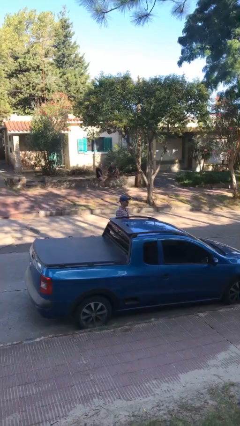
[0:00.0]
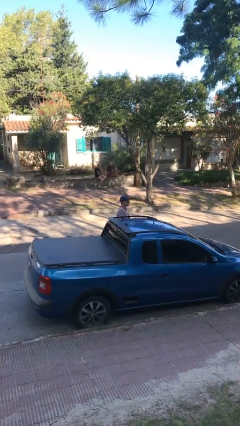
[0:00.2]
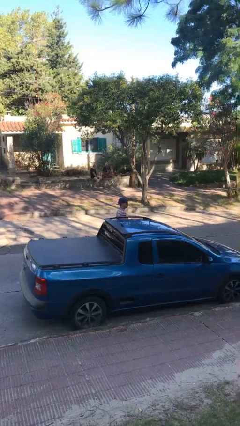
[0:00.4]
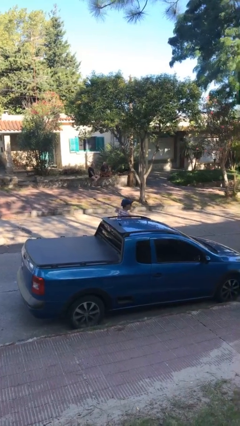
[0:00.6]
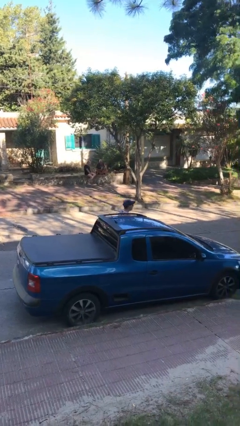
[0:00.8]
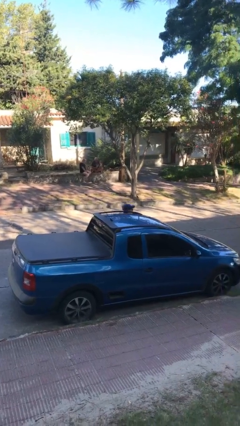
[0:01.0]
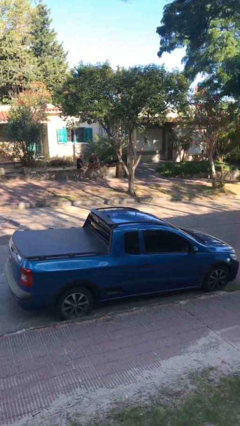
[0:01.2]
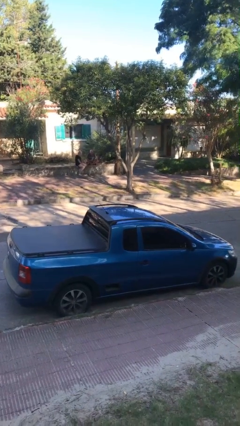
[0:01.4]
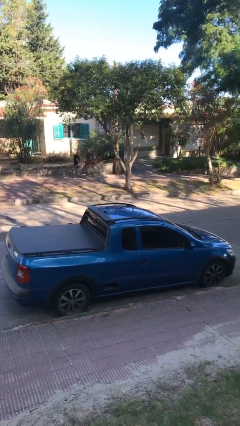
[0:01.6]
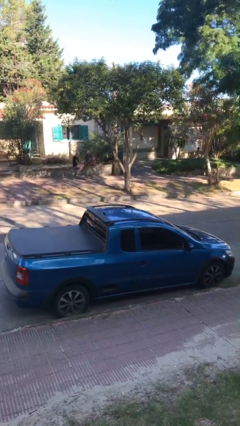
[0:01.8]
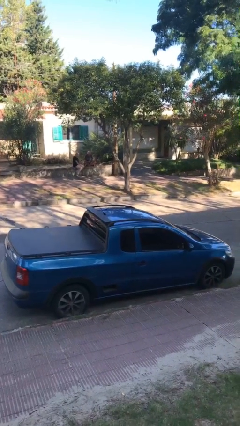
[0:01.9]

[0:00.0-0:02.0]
person enters car

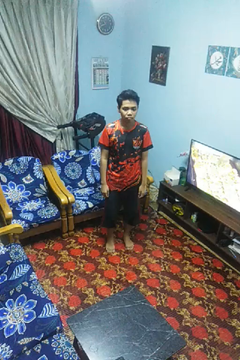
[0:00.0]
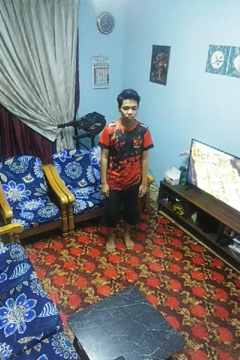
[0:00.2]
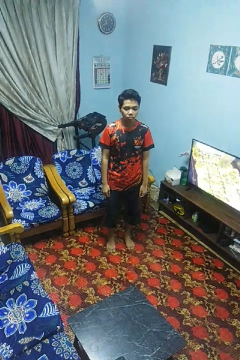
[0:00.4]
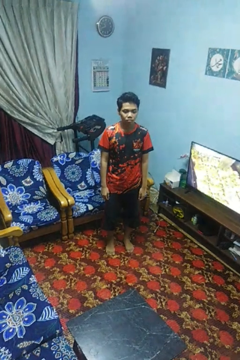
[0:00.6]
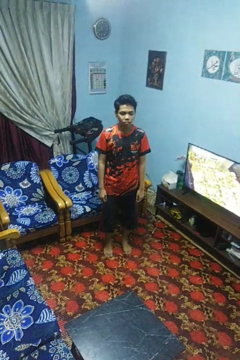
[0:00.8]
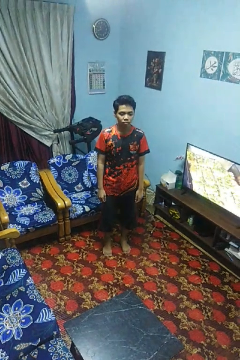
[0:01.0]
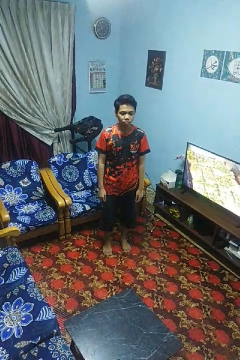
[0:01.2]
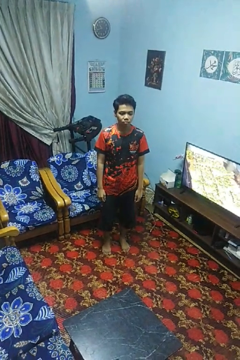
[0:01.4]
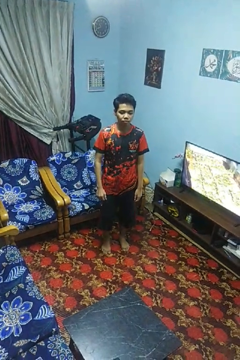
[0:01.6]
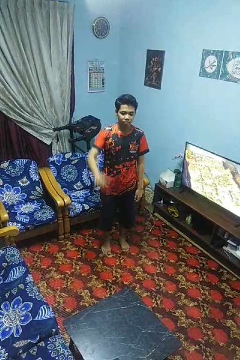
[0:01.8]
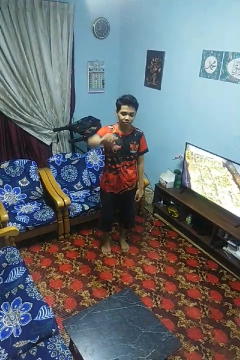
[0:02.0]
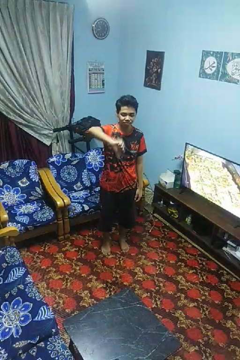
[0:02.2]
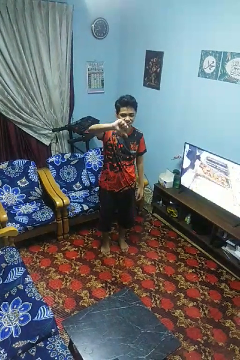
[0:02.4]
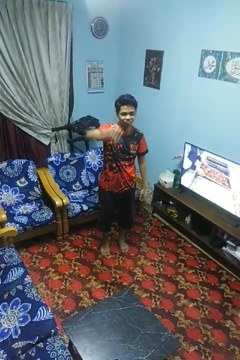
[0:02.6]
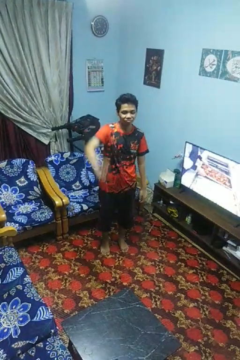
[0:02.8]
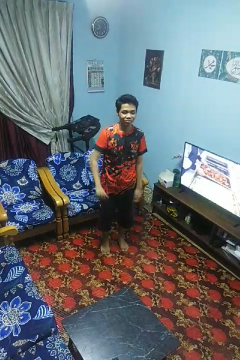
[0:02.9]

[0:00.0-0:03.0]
person gestures thumbs down

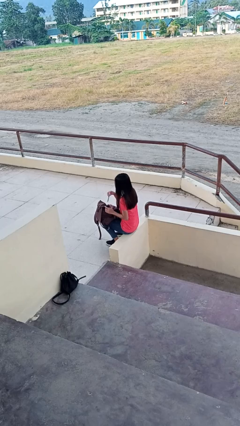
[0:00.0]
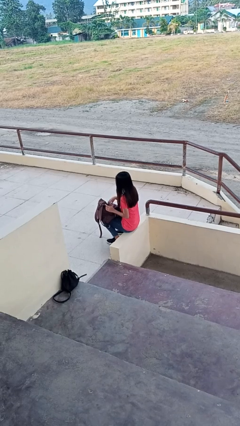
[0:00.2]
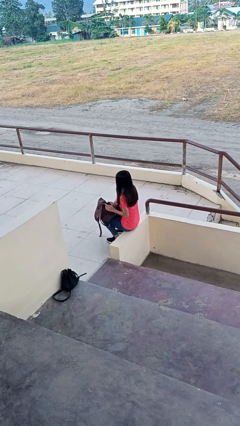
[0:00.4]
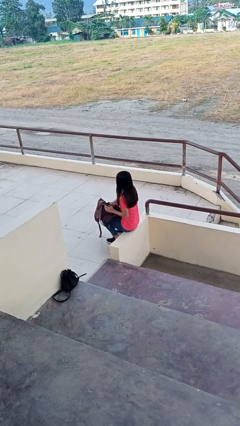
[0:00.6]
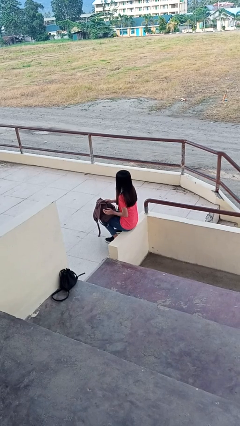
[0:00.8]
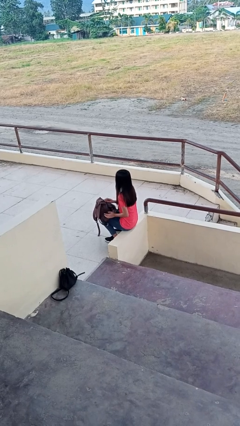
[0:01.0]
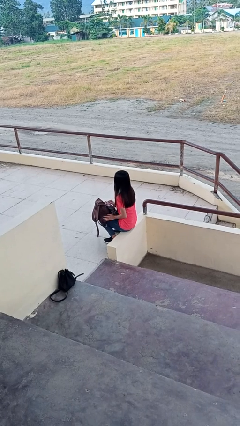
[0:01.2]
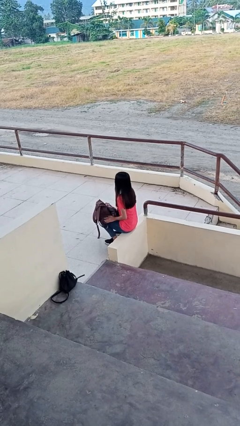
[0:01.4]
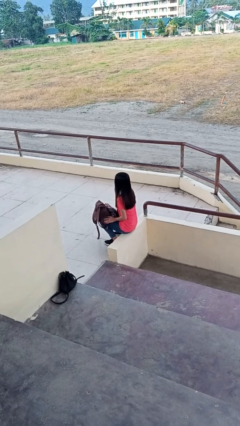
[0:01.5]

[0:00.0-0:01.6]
person puts object into backpack

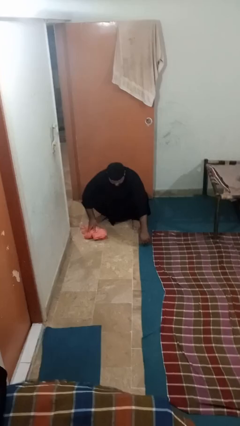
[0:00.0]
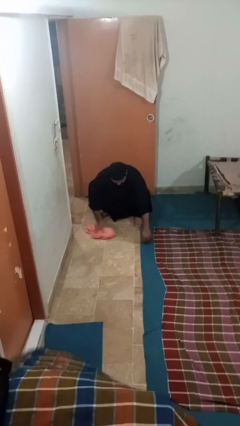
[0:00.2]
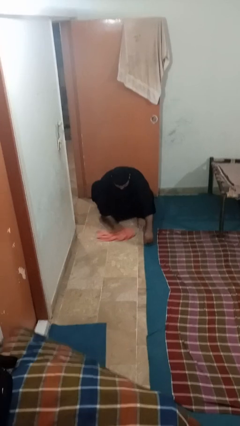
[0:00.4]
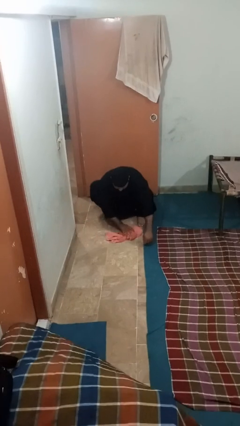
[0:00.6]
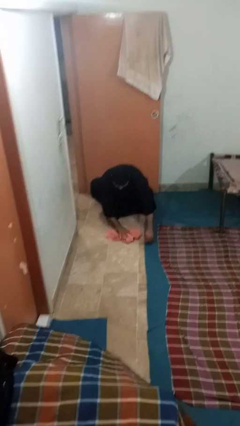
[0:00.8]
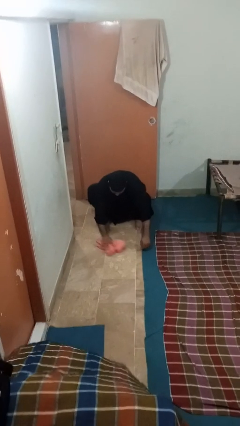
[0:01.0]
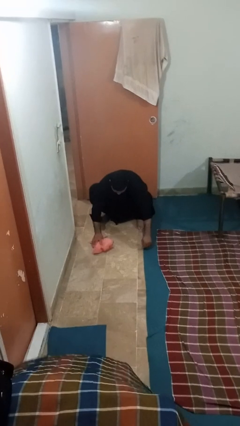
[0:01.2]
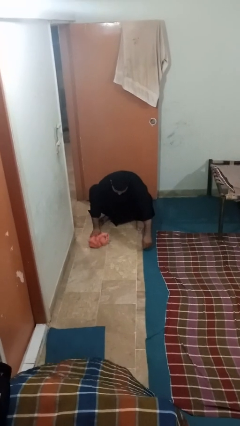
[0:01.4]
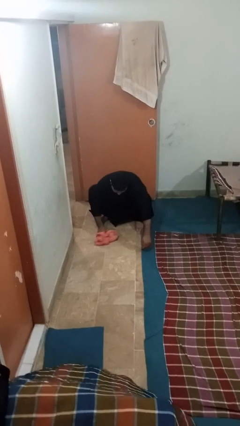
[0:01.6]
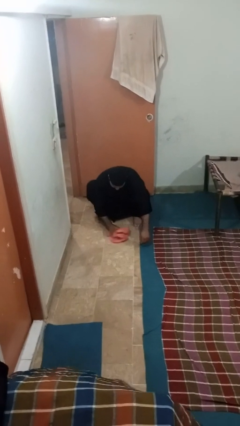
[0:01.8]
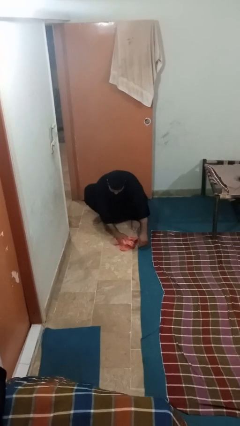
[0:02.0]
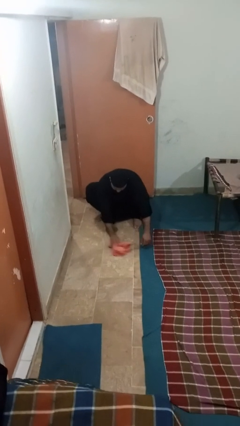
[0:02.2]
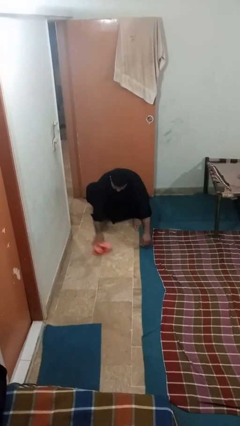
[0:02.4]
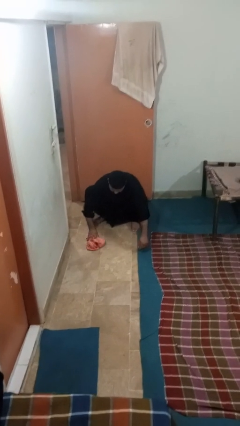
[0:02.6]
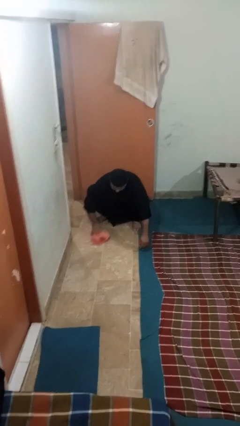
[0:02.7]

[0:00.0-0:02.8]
person mops

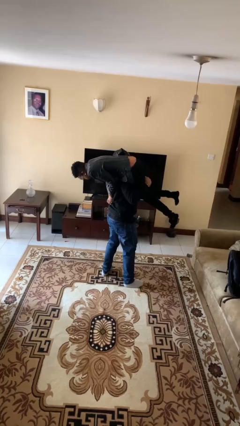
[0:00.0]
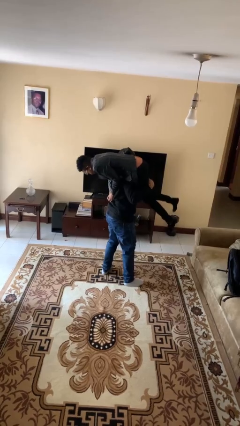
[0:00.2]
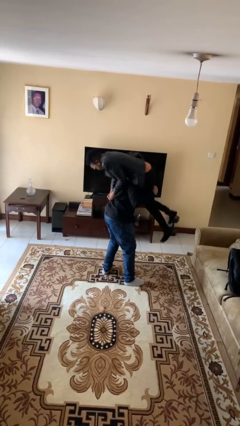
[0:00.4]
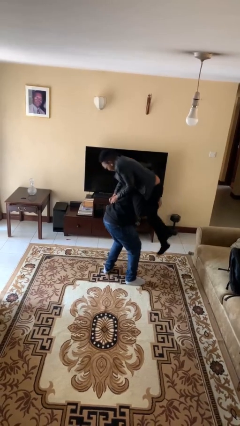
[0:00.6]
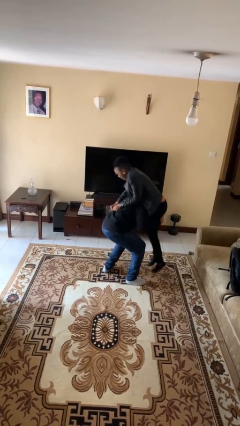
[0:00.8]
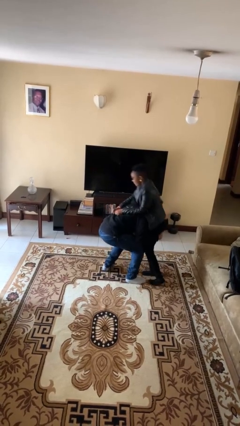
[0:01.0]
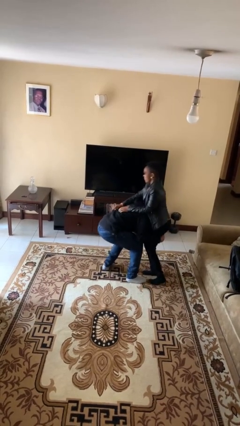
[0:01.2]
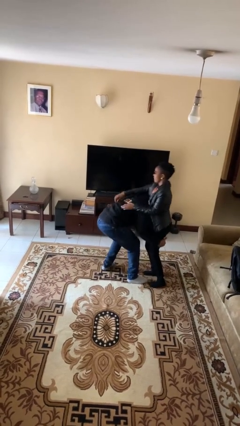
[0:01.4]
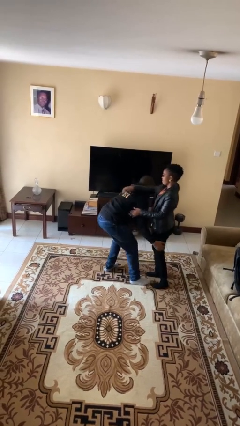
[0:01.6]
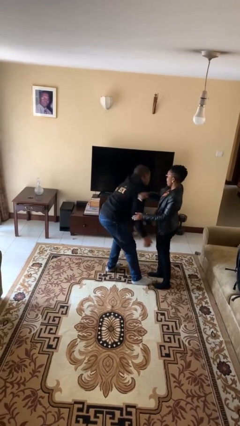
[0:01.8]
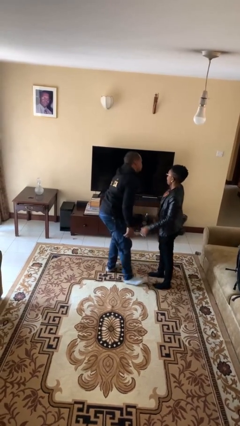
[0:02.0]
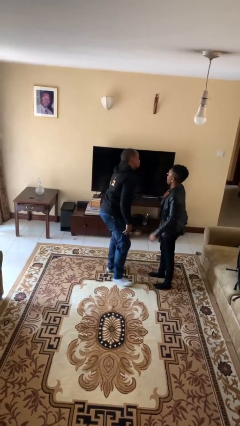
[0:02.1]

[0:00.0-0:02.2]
person puts down person

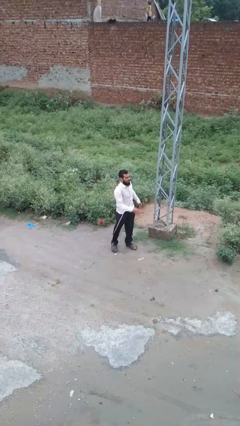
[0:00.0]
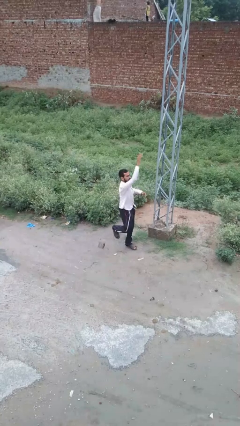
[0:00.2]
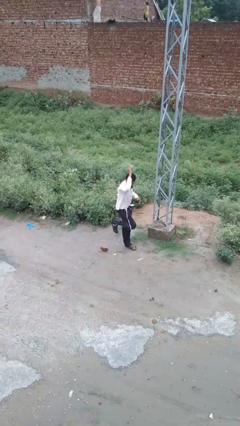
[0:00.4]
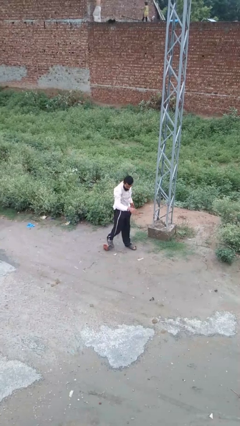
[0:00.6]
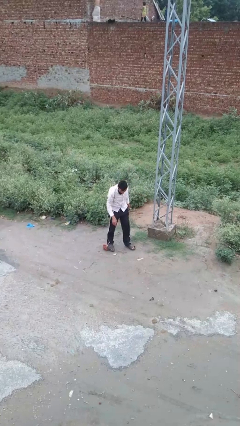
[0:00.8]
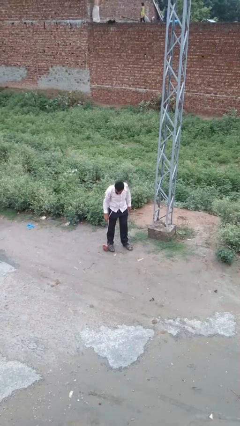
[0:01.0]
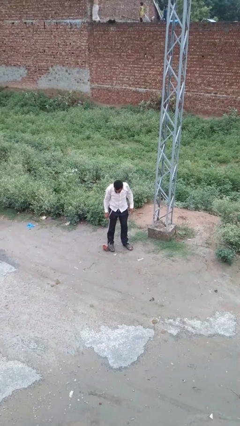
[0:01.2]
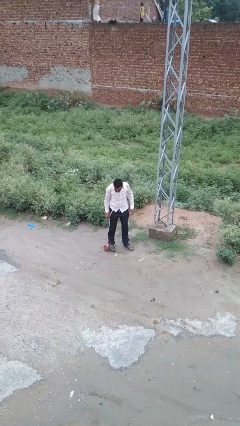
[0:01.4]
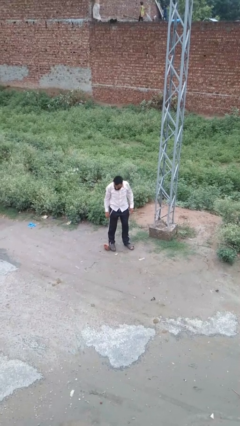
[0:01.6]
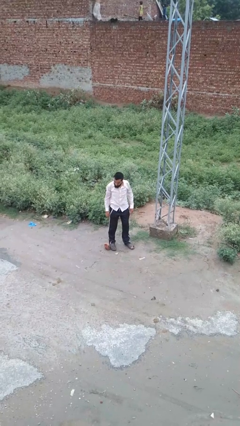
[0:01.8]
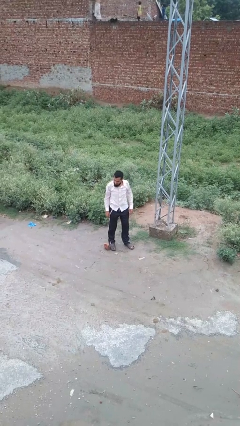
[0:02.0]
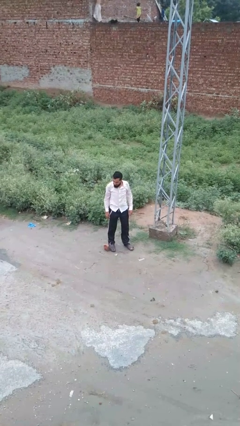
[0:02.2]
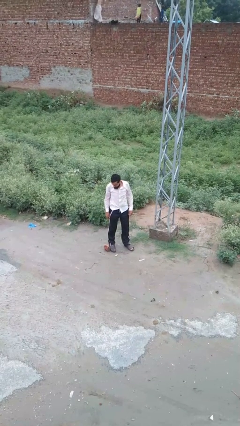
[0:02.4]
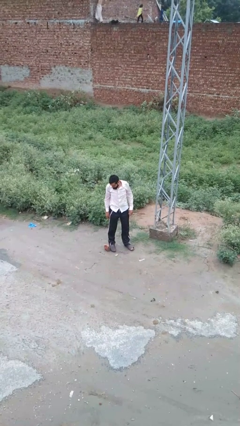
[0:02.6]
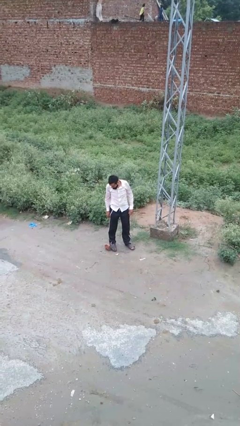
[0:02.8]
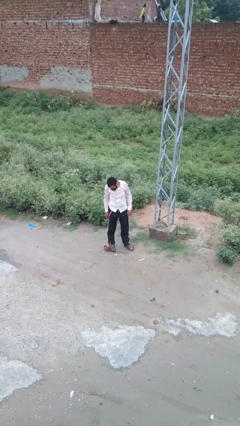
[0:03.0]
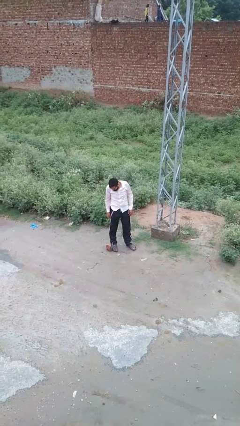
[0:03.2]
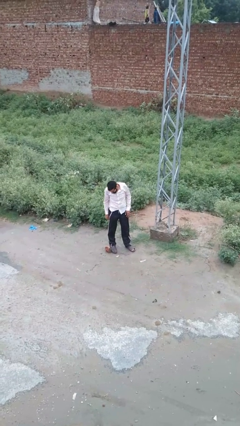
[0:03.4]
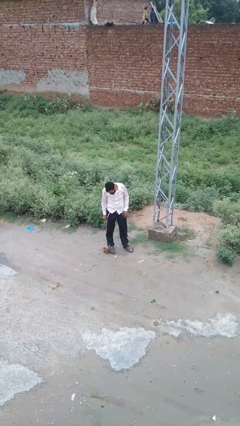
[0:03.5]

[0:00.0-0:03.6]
person drops object

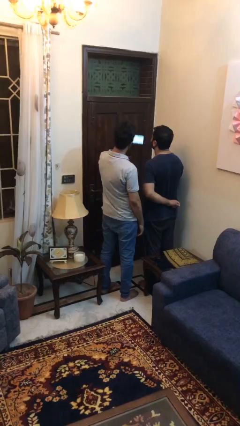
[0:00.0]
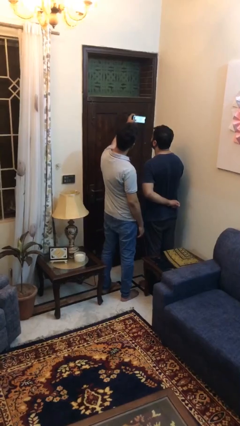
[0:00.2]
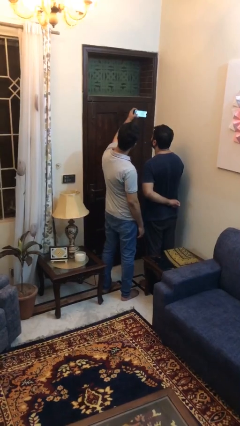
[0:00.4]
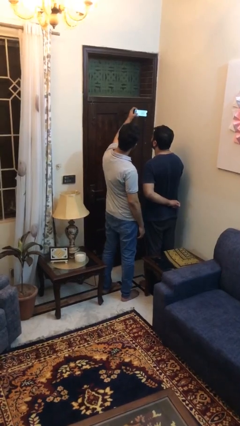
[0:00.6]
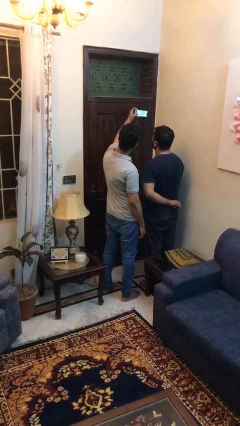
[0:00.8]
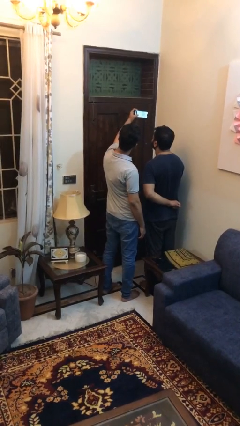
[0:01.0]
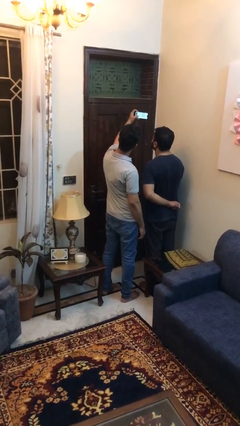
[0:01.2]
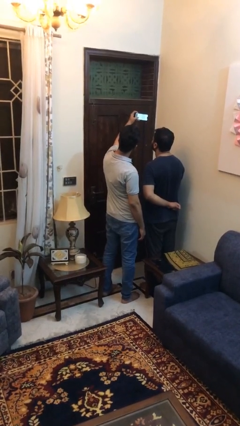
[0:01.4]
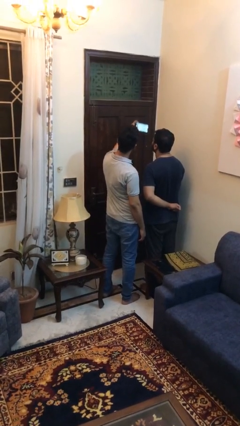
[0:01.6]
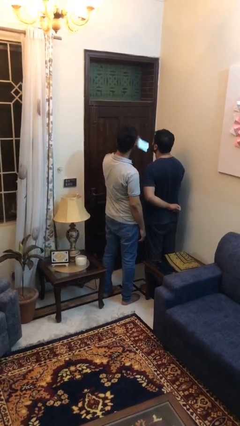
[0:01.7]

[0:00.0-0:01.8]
person takes selfie with person

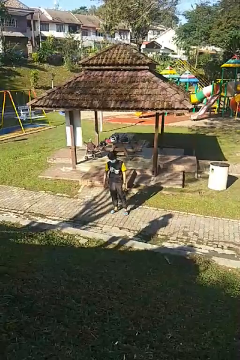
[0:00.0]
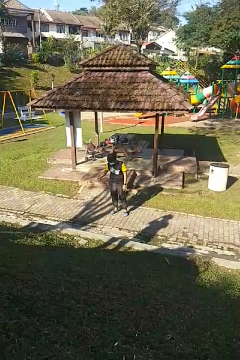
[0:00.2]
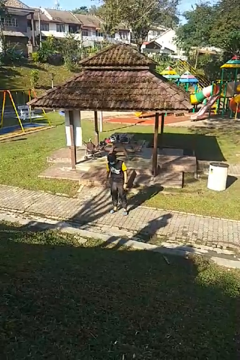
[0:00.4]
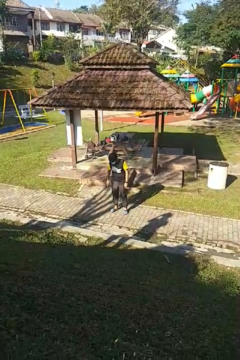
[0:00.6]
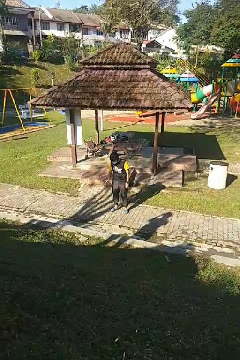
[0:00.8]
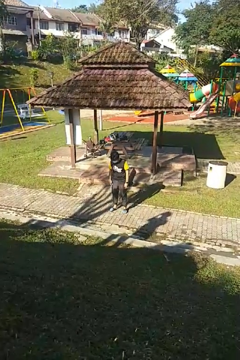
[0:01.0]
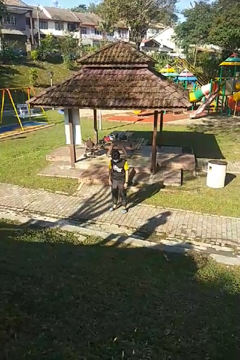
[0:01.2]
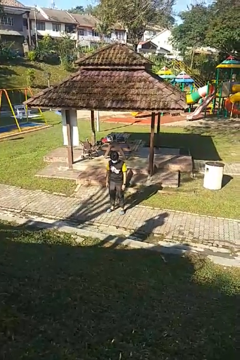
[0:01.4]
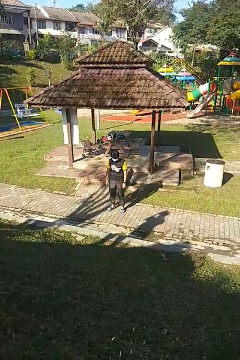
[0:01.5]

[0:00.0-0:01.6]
person slaps hands on thighs
